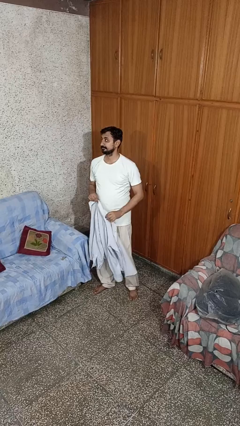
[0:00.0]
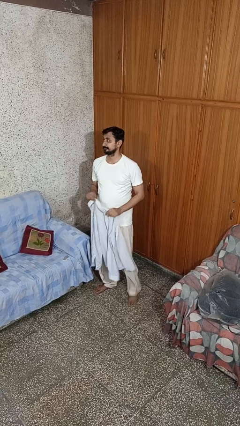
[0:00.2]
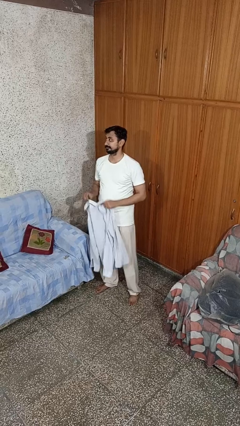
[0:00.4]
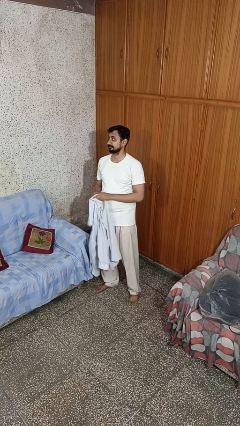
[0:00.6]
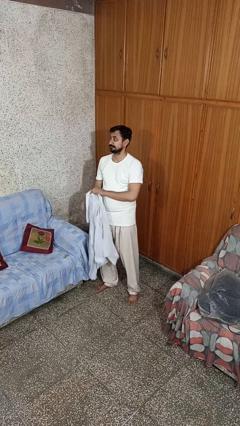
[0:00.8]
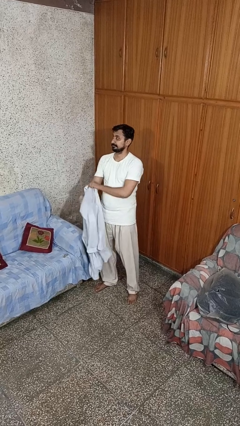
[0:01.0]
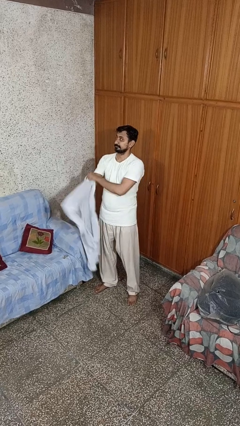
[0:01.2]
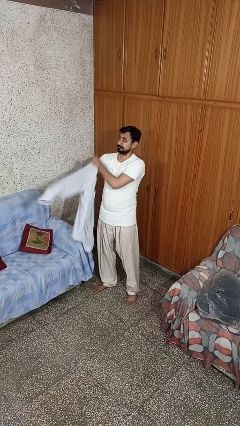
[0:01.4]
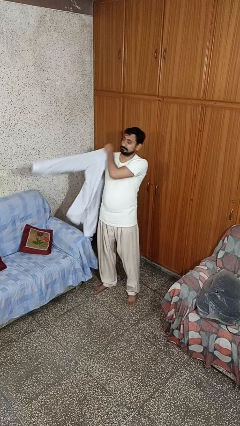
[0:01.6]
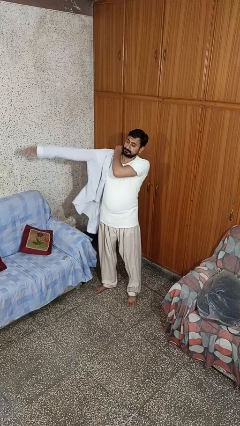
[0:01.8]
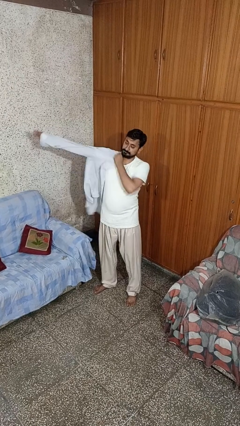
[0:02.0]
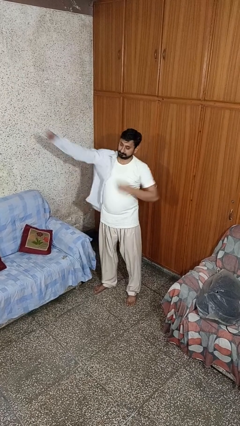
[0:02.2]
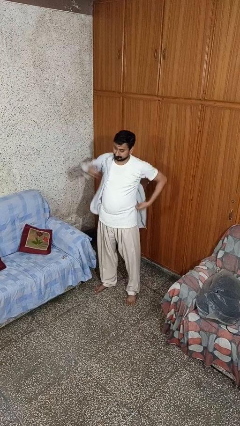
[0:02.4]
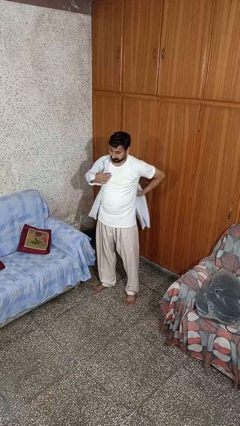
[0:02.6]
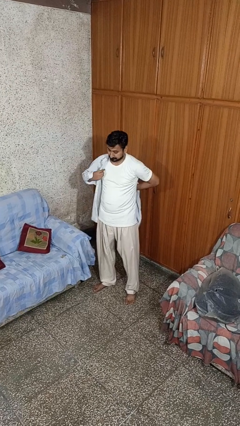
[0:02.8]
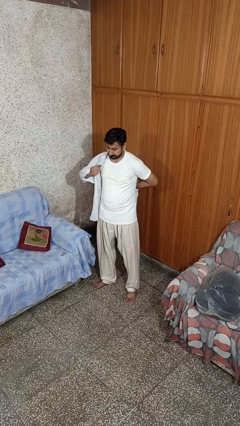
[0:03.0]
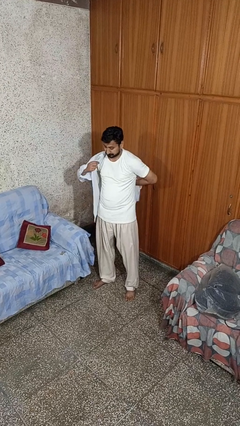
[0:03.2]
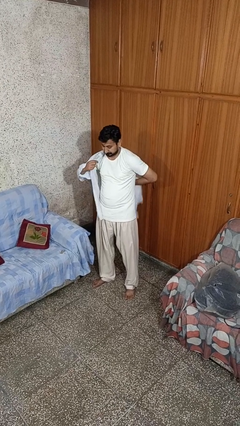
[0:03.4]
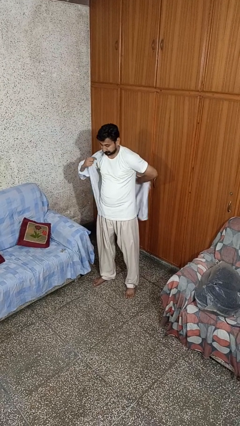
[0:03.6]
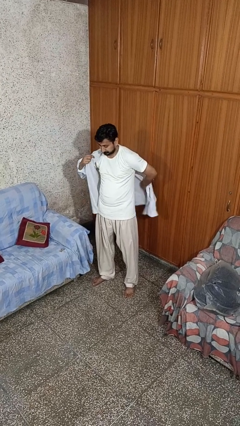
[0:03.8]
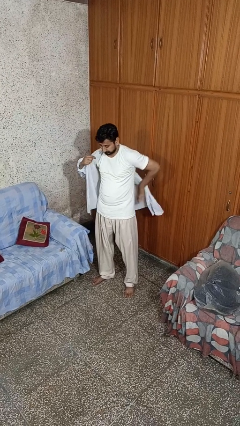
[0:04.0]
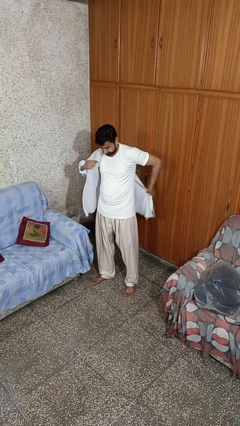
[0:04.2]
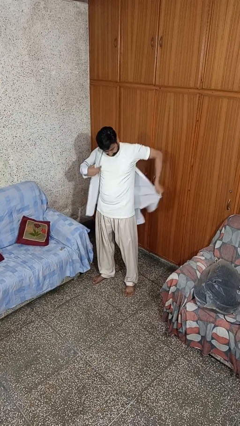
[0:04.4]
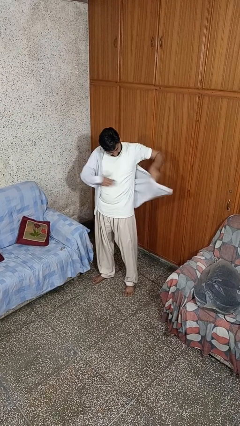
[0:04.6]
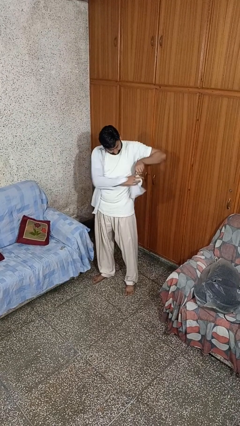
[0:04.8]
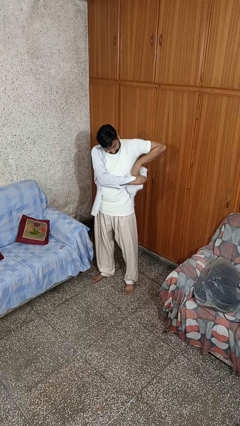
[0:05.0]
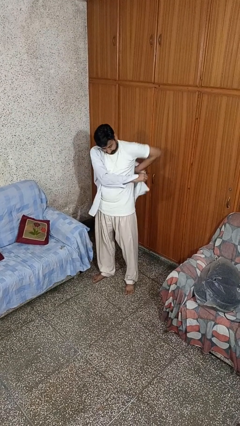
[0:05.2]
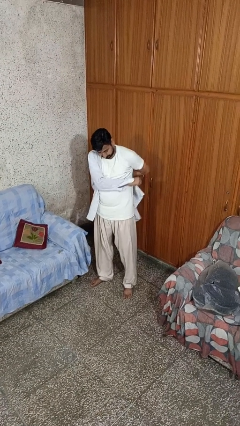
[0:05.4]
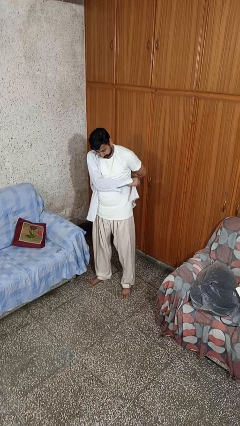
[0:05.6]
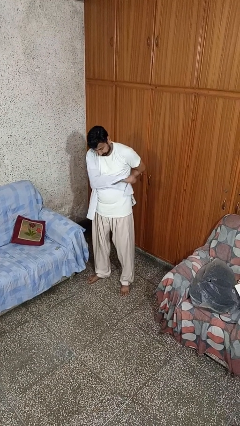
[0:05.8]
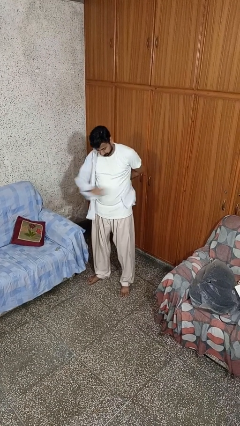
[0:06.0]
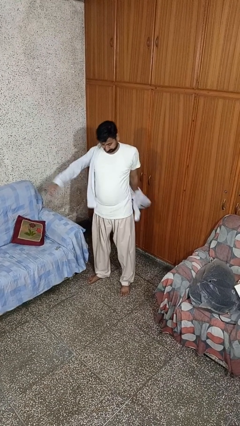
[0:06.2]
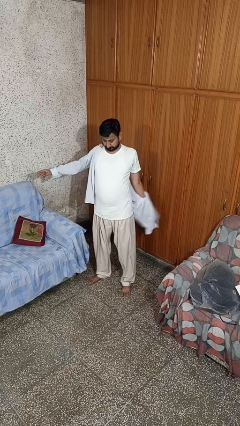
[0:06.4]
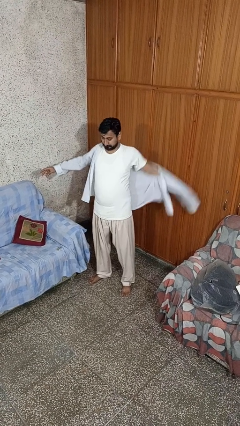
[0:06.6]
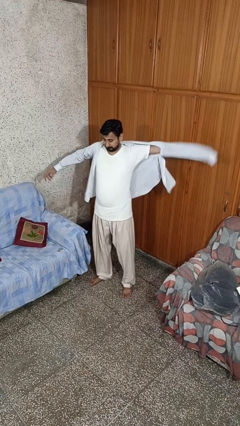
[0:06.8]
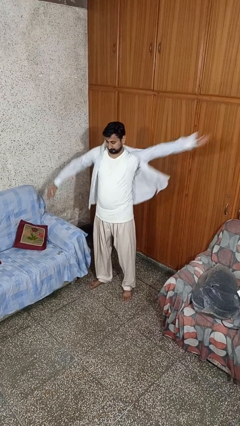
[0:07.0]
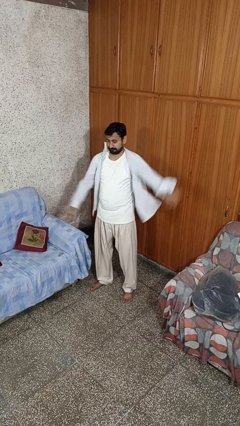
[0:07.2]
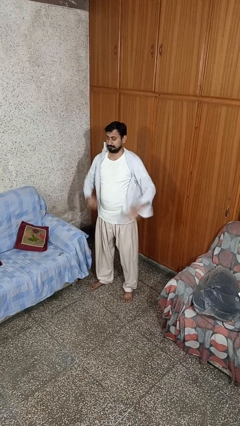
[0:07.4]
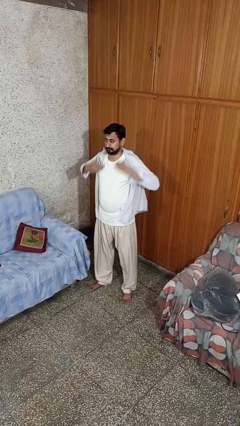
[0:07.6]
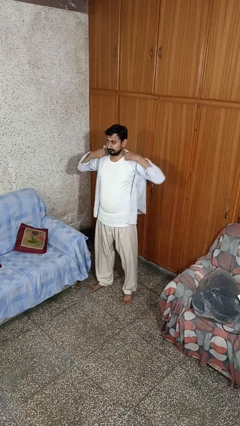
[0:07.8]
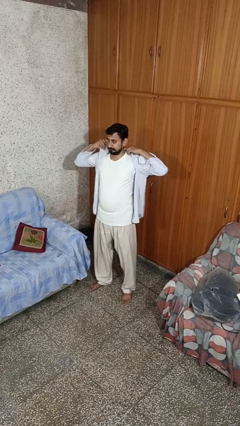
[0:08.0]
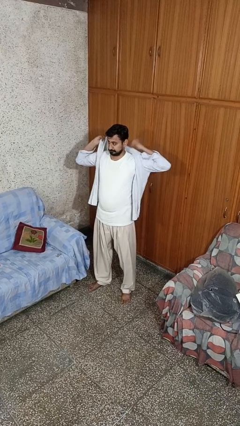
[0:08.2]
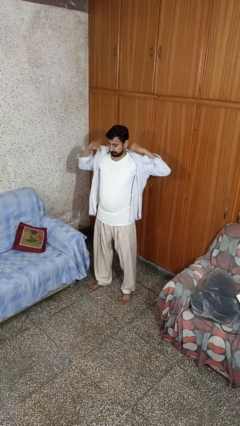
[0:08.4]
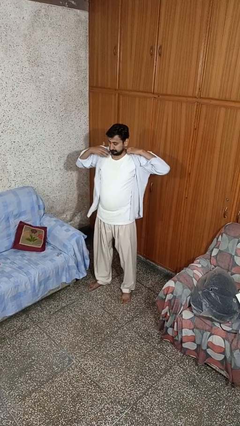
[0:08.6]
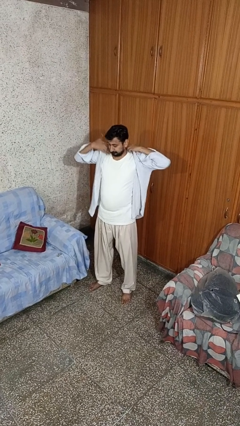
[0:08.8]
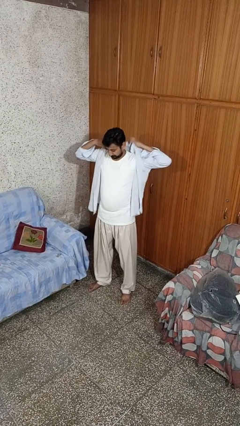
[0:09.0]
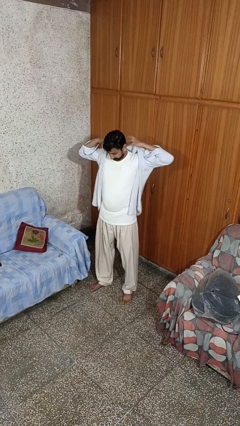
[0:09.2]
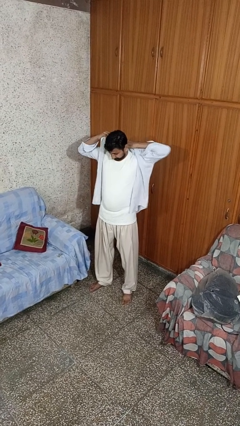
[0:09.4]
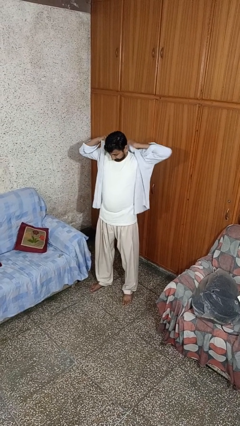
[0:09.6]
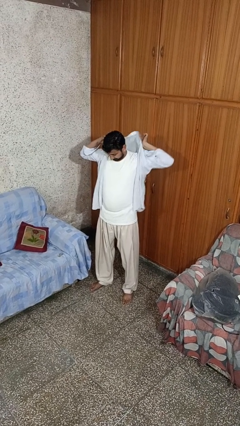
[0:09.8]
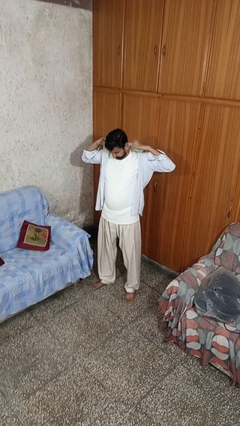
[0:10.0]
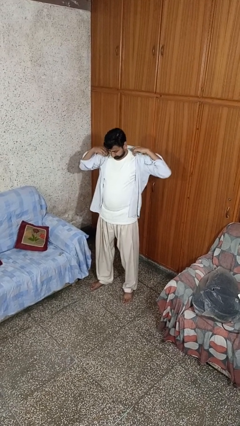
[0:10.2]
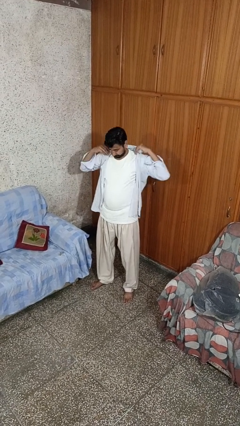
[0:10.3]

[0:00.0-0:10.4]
person puts on shirt

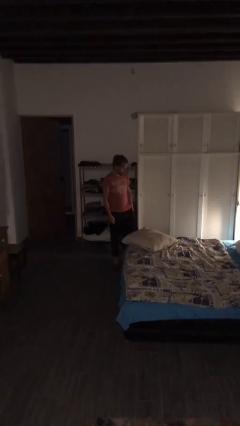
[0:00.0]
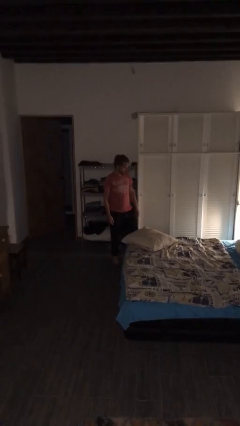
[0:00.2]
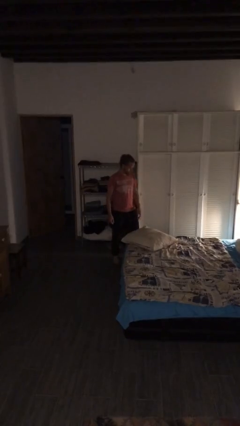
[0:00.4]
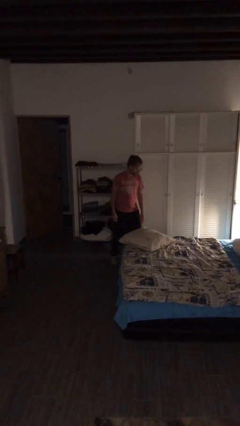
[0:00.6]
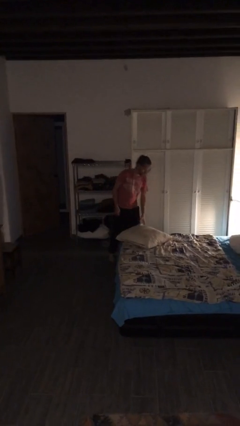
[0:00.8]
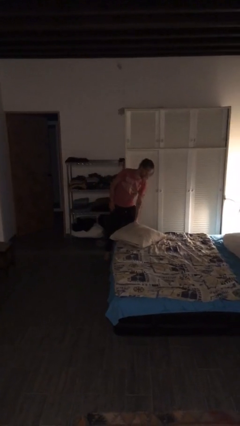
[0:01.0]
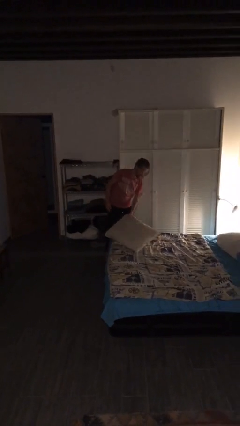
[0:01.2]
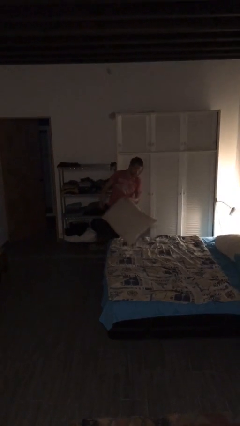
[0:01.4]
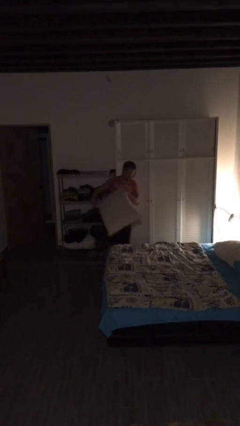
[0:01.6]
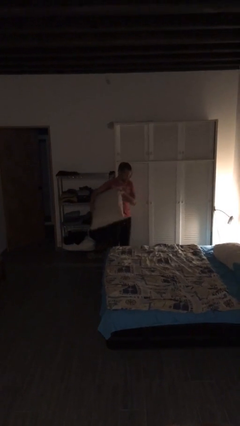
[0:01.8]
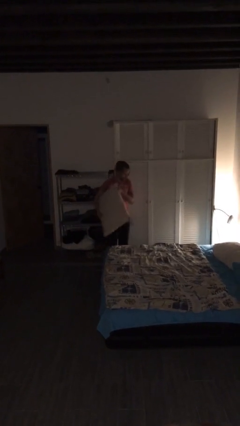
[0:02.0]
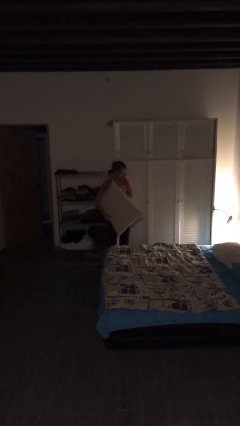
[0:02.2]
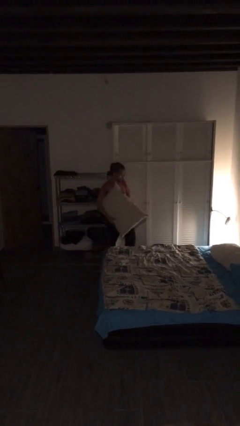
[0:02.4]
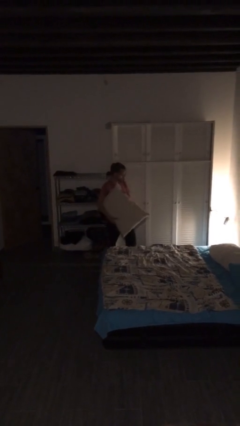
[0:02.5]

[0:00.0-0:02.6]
person picks up object from bed

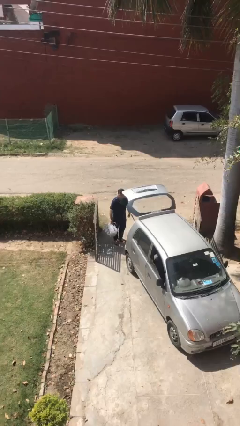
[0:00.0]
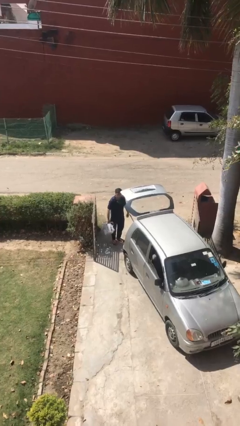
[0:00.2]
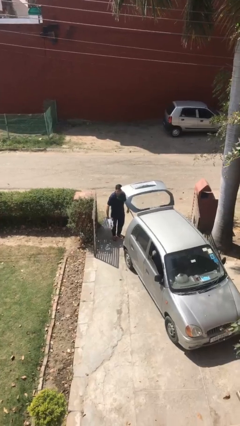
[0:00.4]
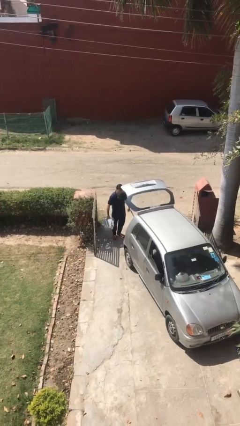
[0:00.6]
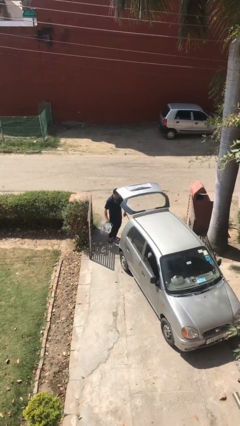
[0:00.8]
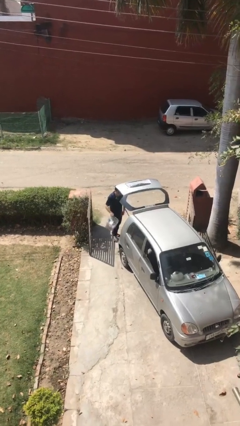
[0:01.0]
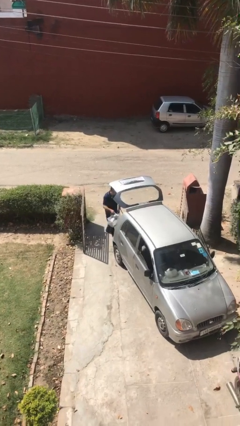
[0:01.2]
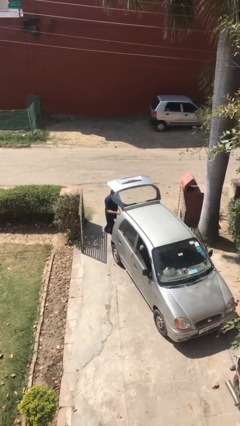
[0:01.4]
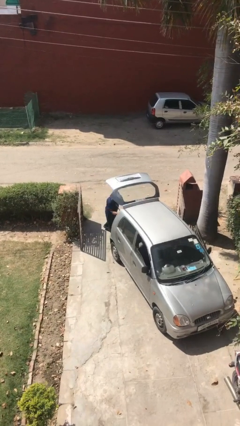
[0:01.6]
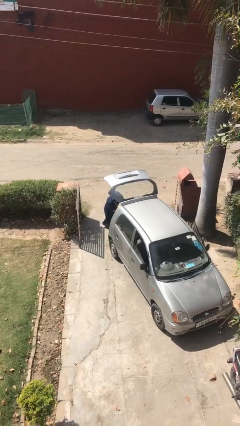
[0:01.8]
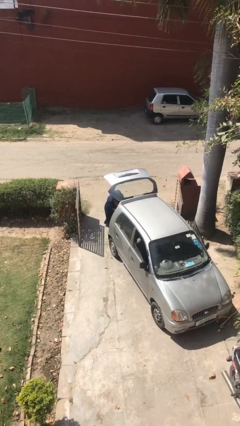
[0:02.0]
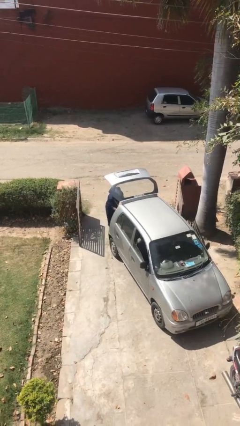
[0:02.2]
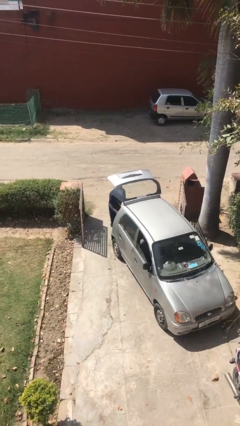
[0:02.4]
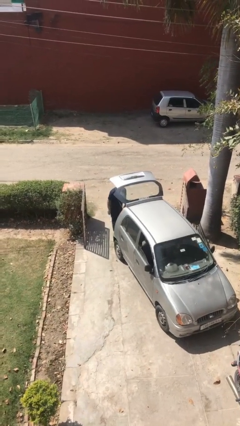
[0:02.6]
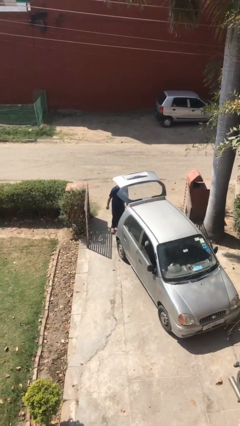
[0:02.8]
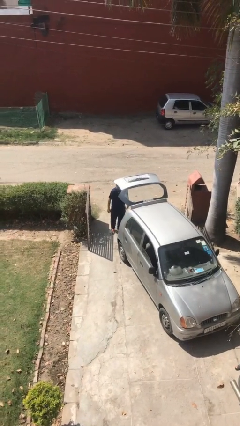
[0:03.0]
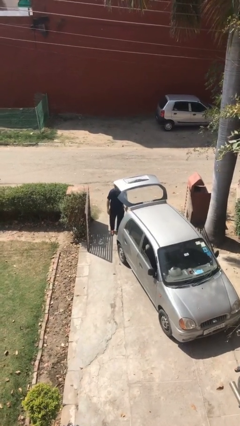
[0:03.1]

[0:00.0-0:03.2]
person loads car

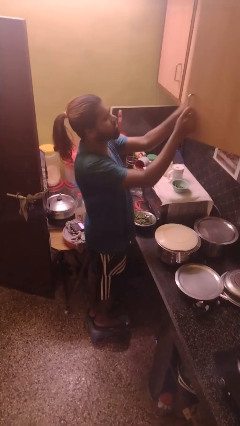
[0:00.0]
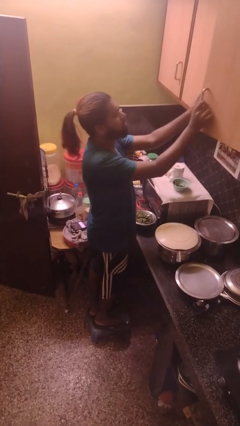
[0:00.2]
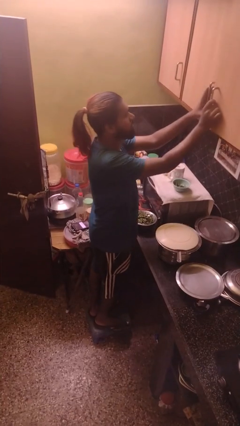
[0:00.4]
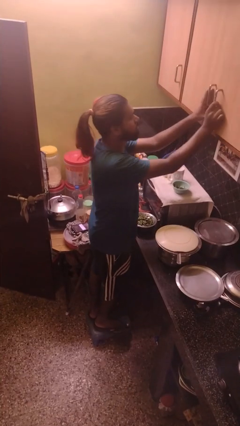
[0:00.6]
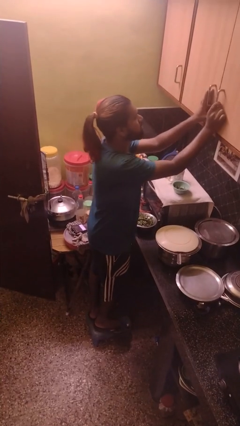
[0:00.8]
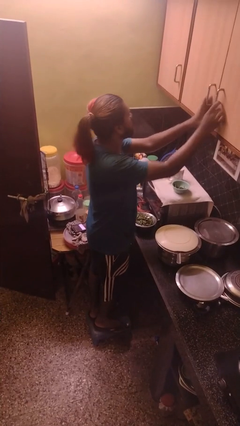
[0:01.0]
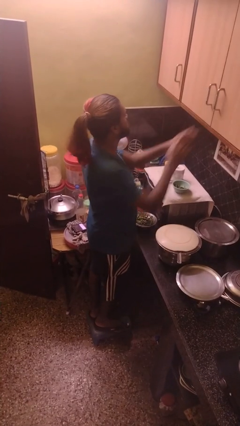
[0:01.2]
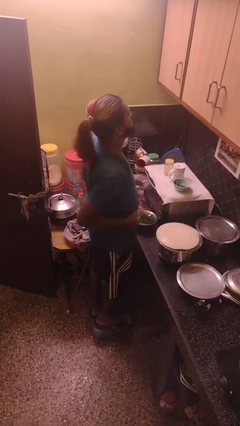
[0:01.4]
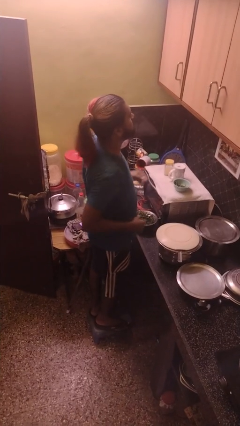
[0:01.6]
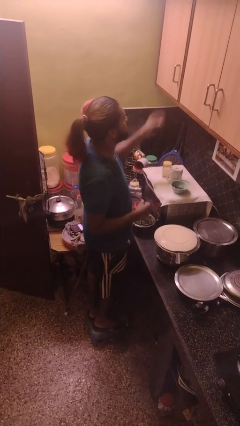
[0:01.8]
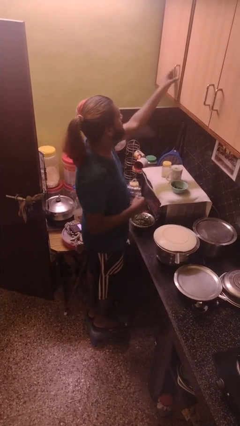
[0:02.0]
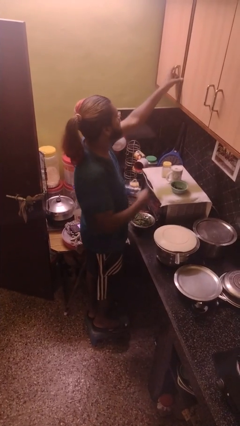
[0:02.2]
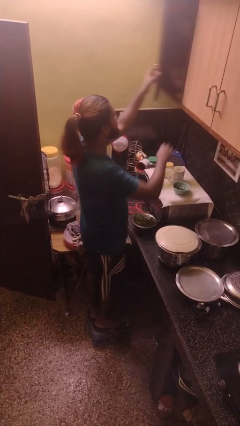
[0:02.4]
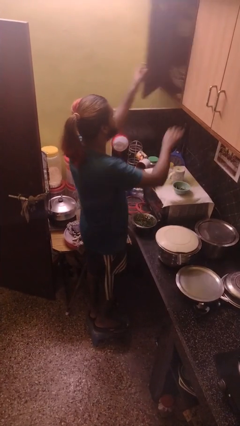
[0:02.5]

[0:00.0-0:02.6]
person closes cabinet
